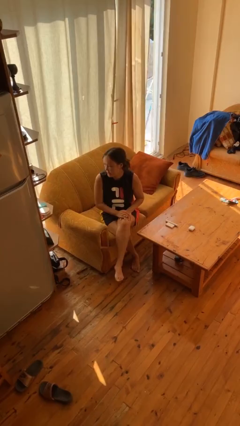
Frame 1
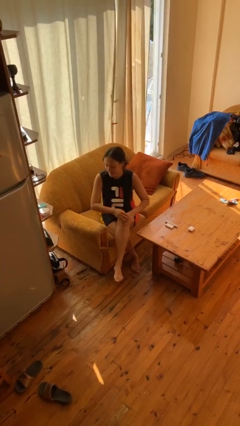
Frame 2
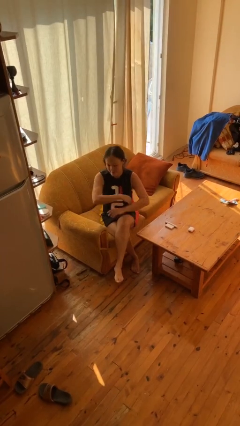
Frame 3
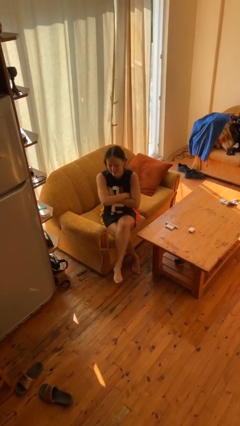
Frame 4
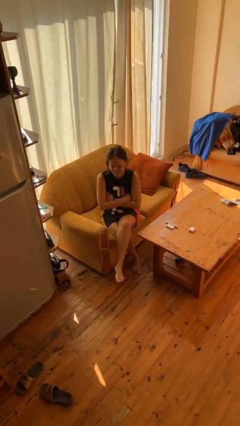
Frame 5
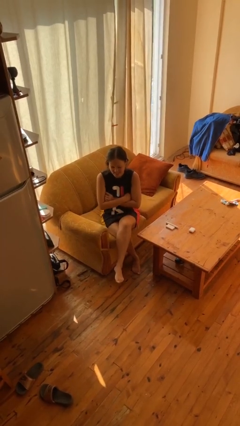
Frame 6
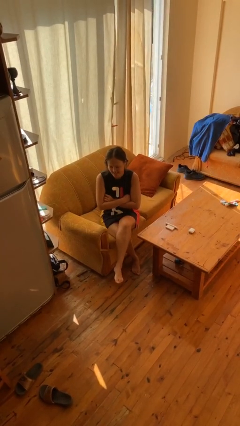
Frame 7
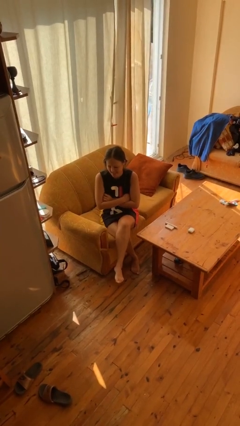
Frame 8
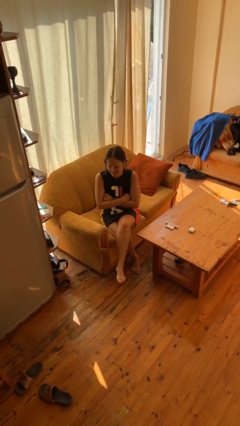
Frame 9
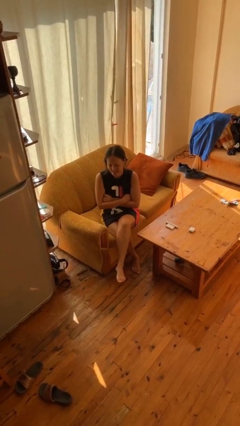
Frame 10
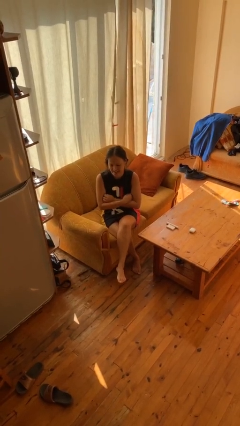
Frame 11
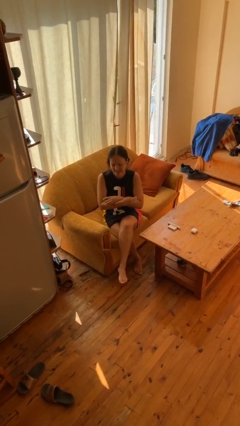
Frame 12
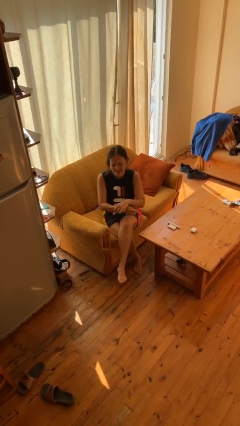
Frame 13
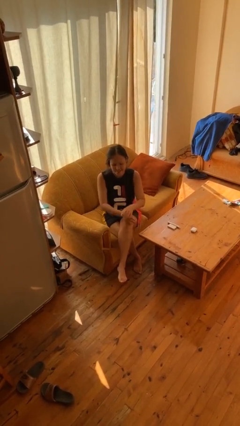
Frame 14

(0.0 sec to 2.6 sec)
person crosses arms

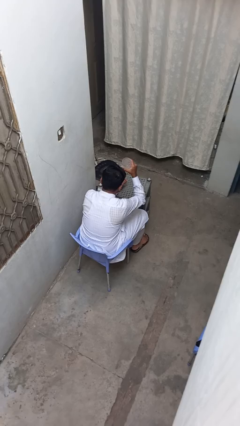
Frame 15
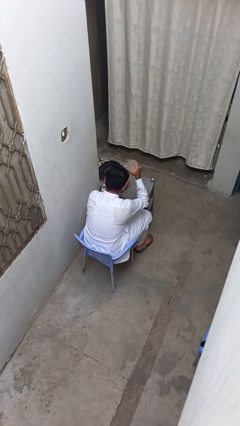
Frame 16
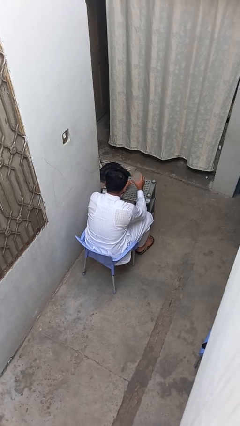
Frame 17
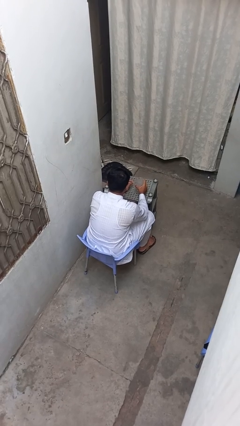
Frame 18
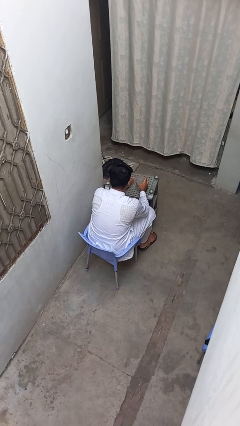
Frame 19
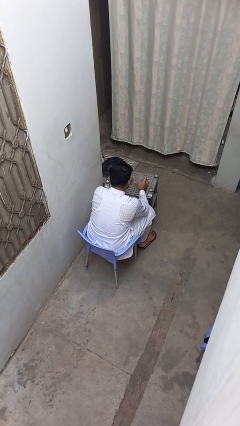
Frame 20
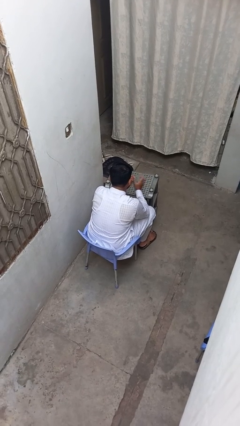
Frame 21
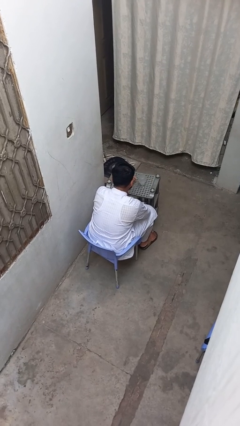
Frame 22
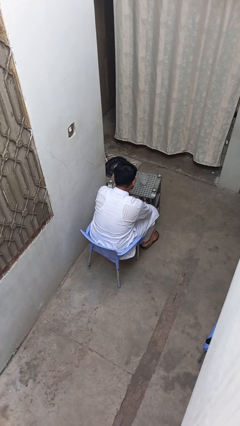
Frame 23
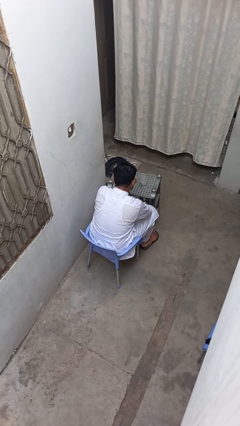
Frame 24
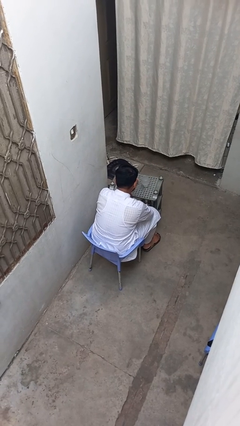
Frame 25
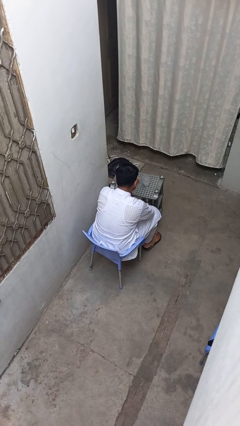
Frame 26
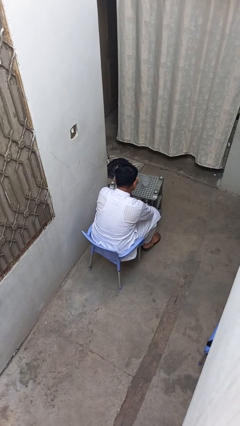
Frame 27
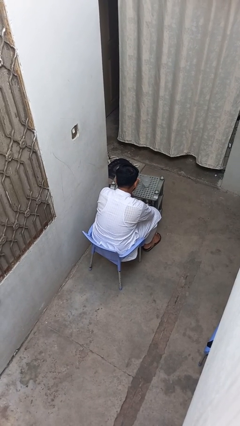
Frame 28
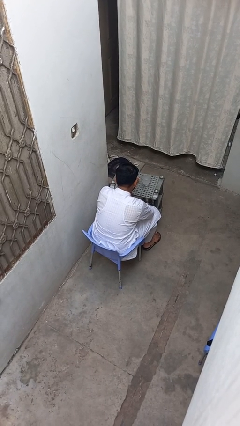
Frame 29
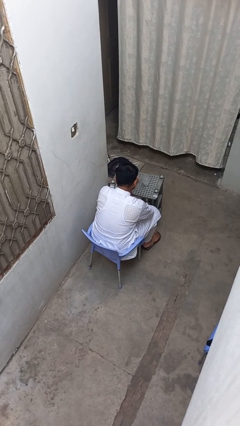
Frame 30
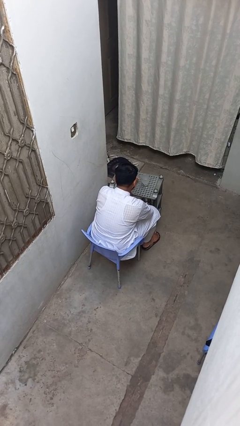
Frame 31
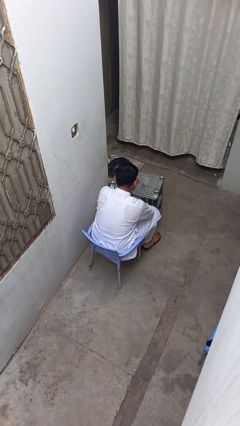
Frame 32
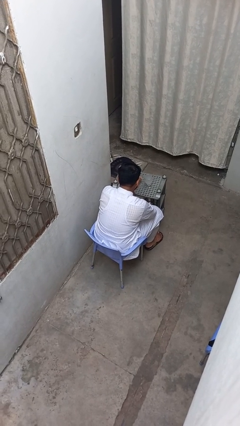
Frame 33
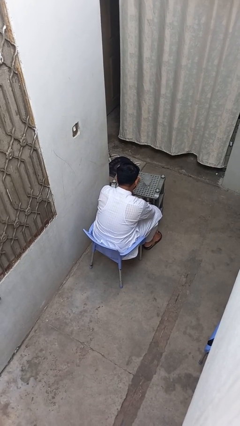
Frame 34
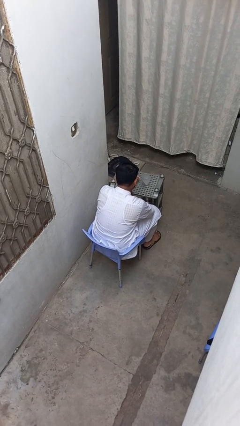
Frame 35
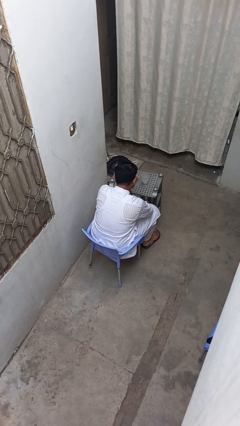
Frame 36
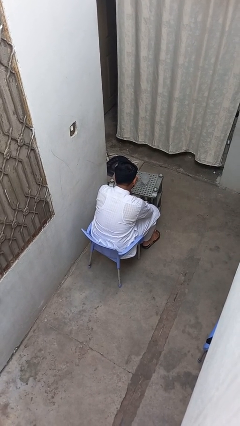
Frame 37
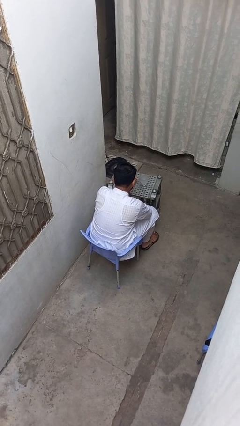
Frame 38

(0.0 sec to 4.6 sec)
person puts down object on table

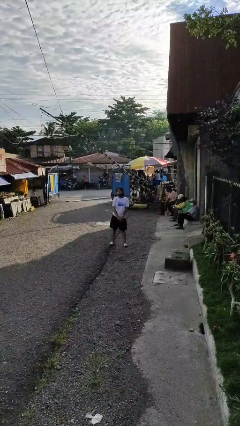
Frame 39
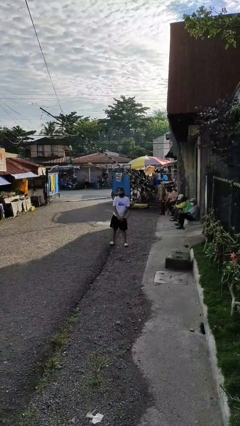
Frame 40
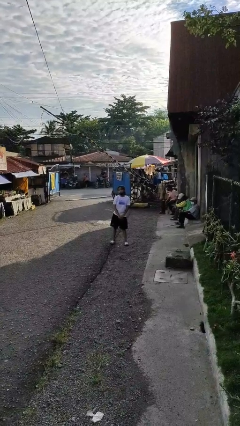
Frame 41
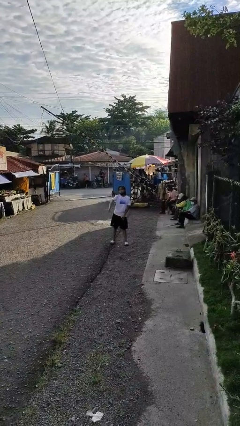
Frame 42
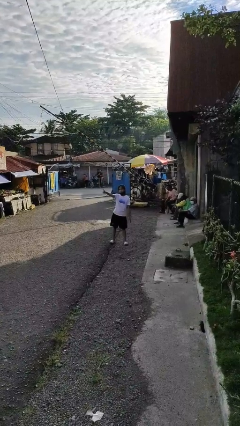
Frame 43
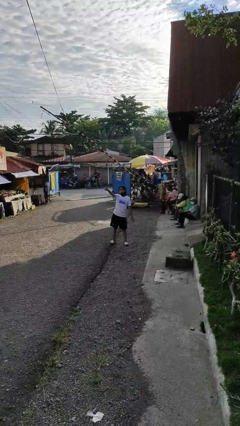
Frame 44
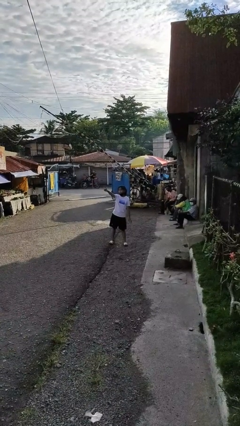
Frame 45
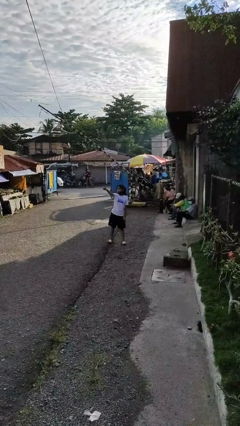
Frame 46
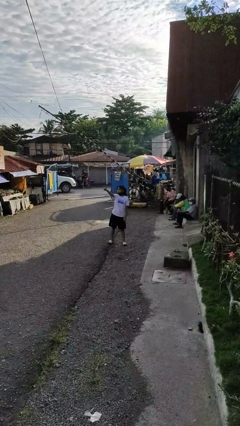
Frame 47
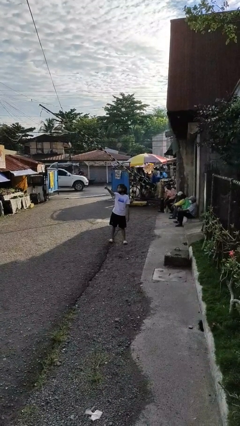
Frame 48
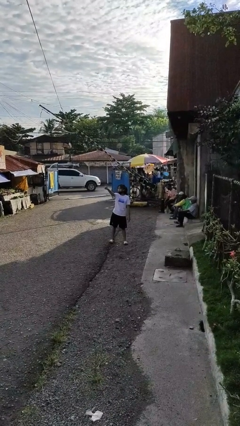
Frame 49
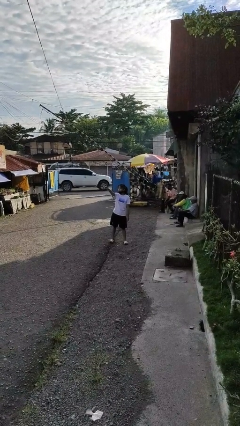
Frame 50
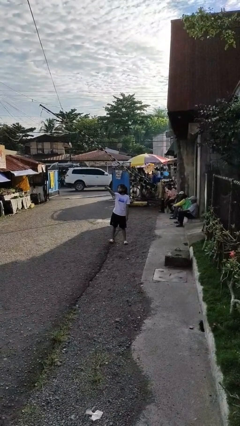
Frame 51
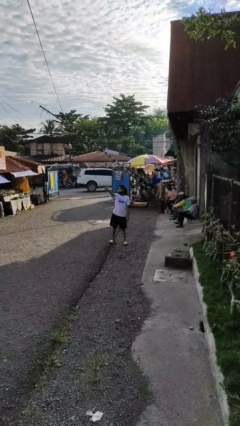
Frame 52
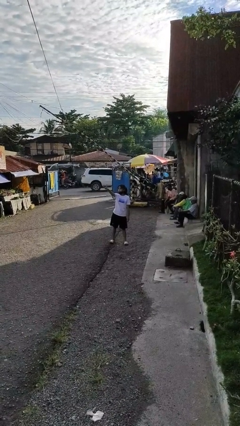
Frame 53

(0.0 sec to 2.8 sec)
person points at person

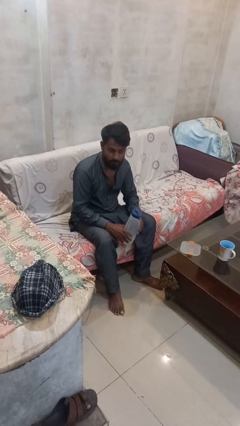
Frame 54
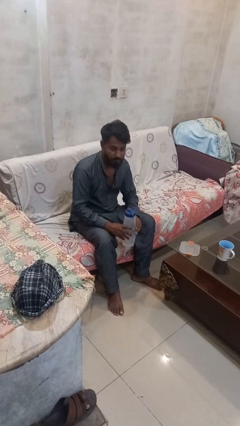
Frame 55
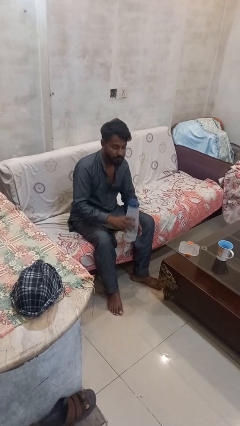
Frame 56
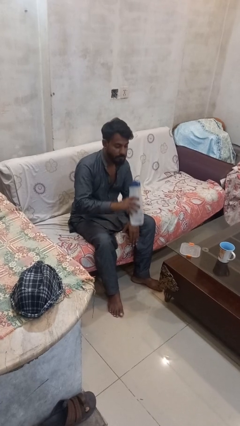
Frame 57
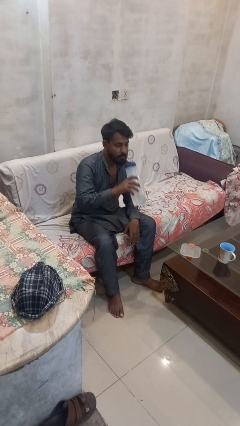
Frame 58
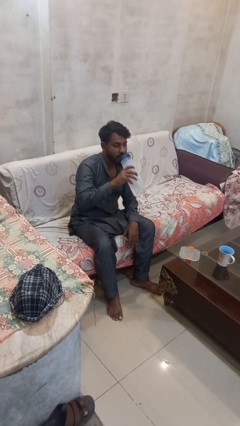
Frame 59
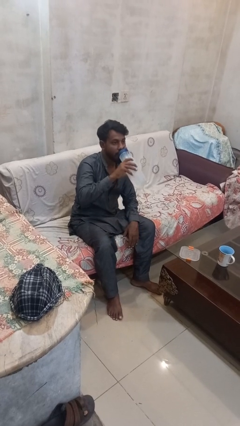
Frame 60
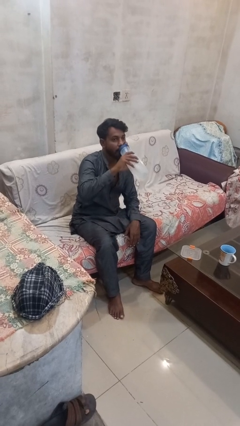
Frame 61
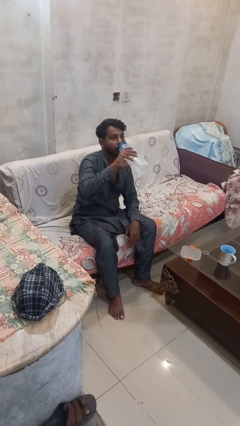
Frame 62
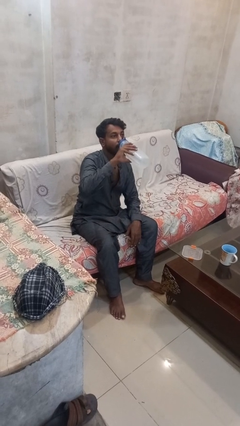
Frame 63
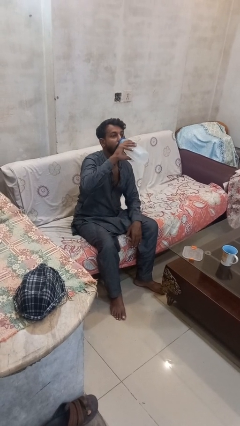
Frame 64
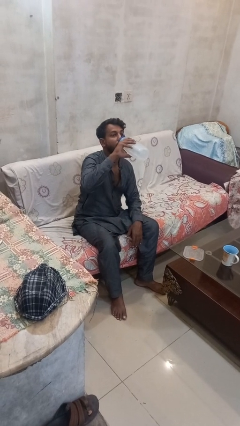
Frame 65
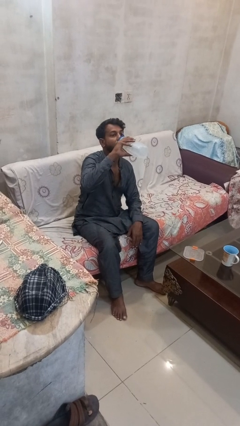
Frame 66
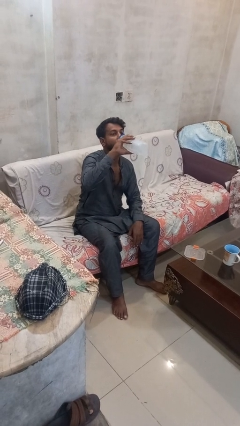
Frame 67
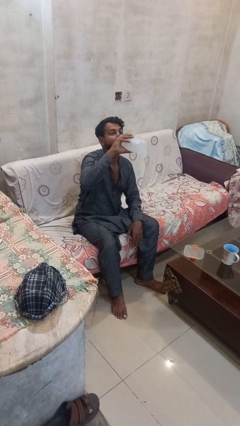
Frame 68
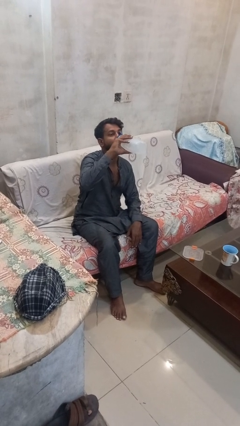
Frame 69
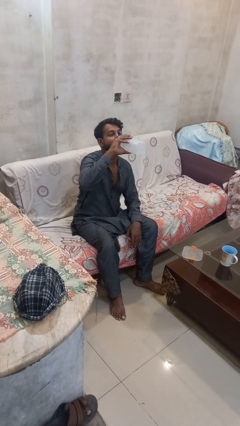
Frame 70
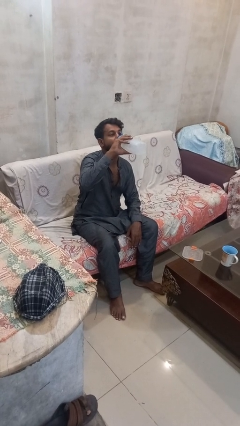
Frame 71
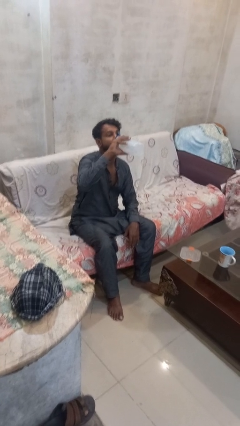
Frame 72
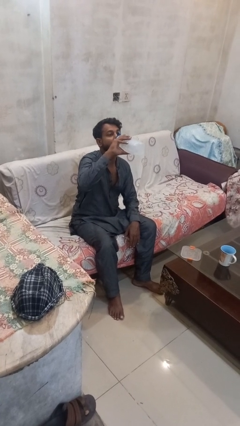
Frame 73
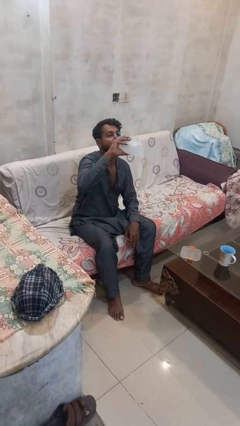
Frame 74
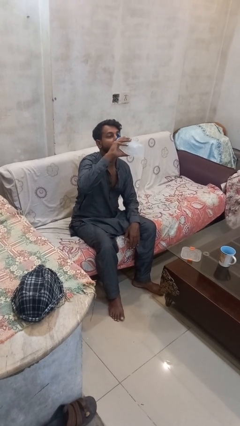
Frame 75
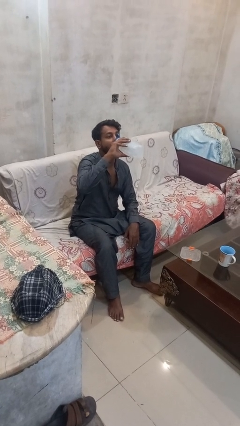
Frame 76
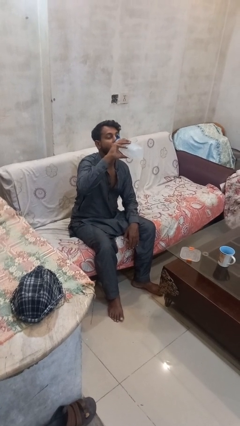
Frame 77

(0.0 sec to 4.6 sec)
person drinks from bottle

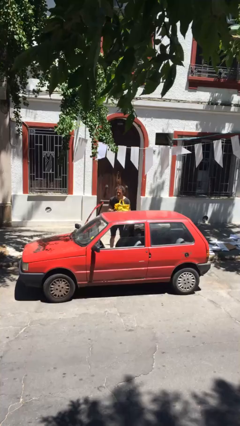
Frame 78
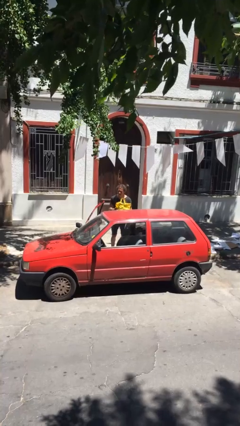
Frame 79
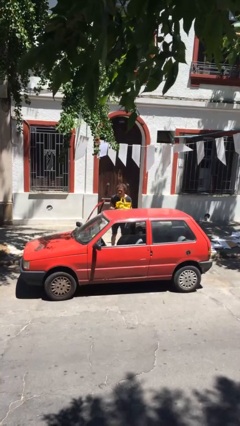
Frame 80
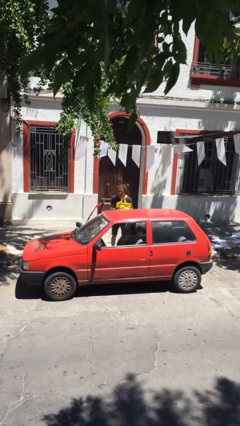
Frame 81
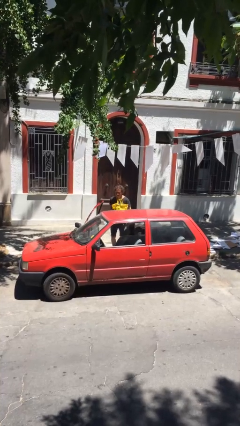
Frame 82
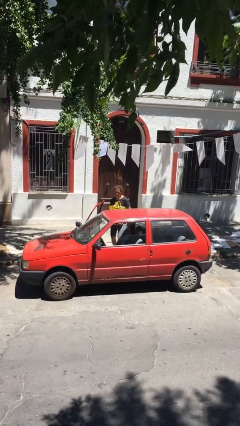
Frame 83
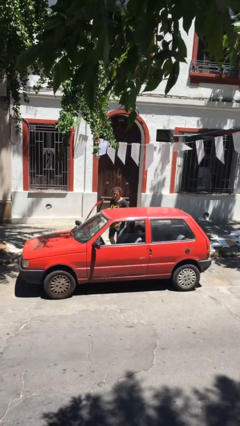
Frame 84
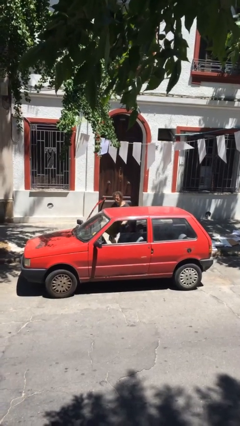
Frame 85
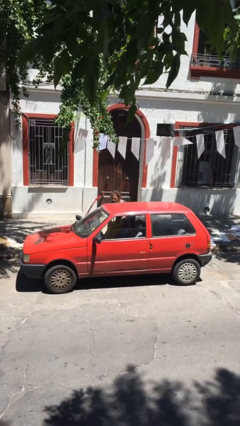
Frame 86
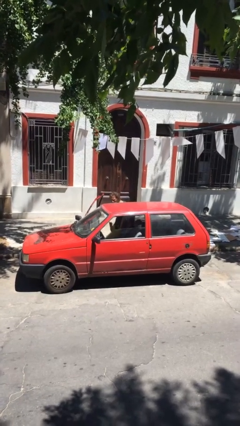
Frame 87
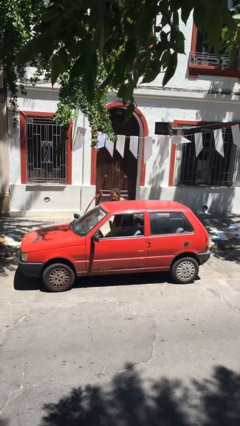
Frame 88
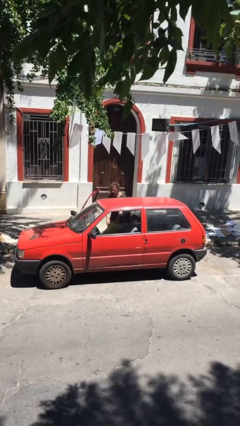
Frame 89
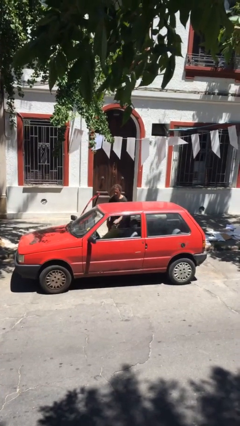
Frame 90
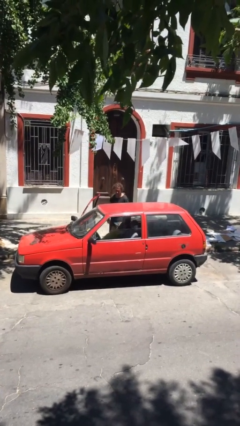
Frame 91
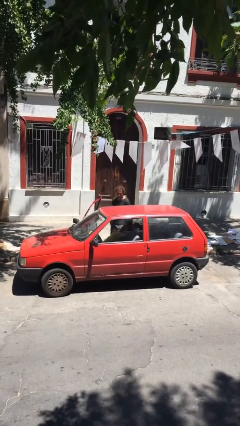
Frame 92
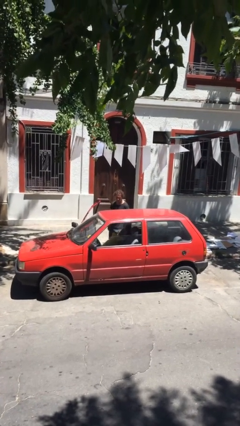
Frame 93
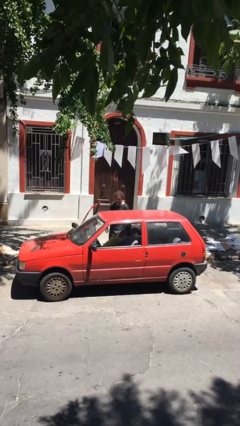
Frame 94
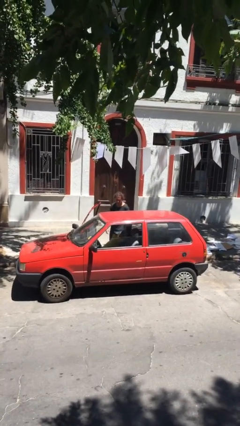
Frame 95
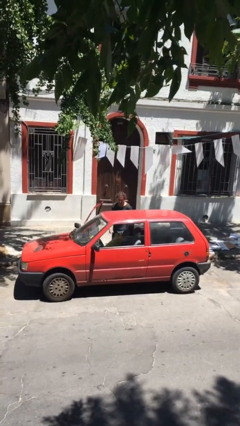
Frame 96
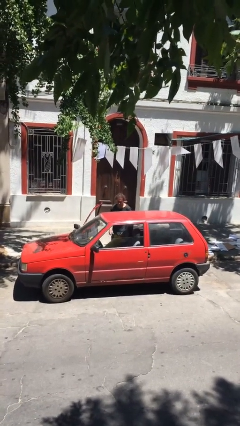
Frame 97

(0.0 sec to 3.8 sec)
person loads car
